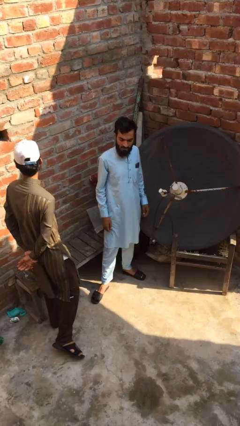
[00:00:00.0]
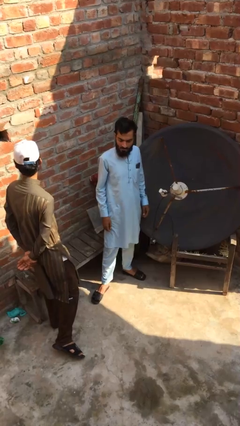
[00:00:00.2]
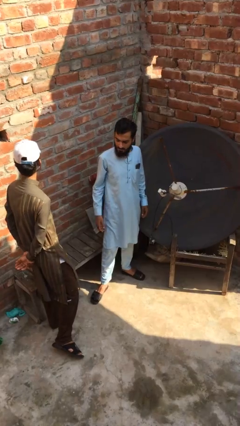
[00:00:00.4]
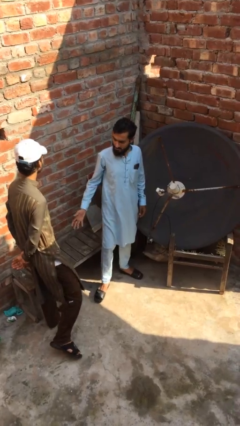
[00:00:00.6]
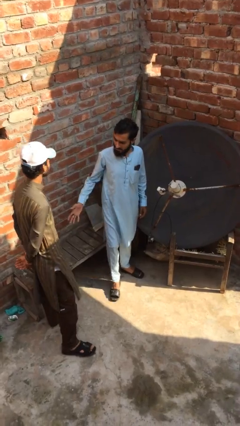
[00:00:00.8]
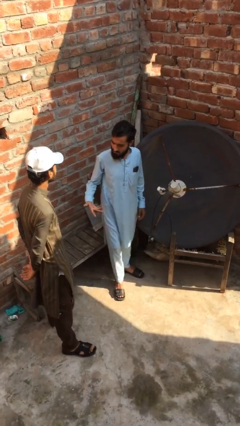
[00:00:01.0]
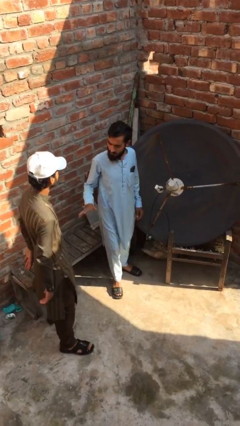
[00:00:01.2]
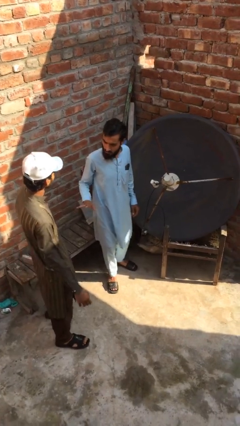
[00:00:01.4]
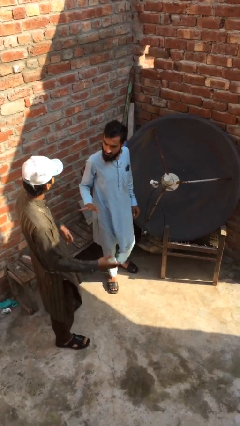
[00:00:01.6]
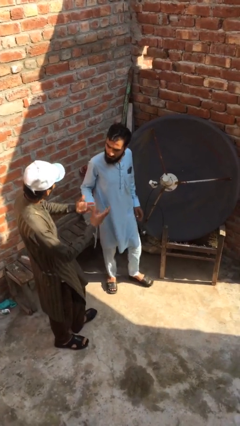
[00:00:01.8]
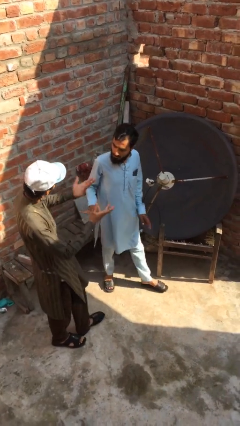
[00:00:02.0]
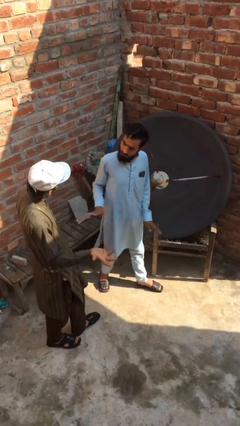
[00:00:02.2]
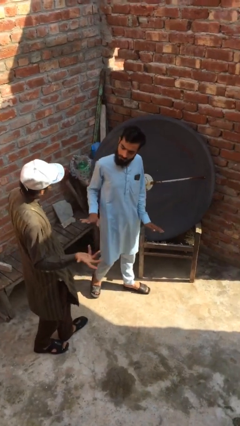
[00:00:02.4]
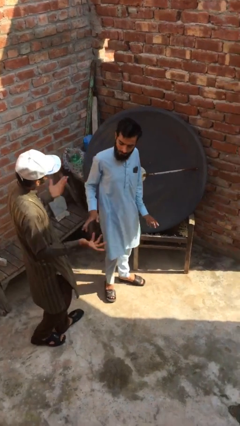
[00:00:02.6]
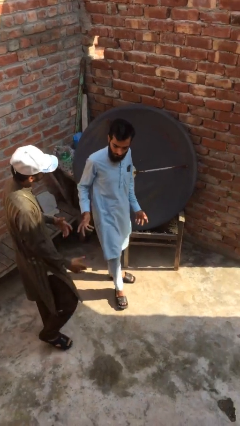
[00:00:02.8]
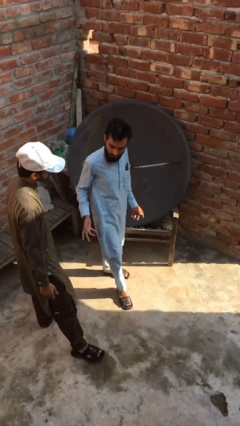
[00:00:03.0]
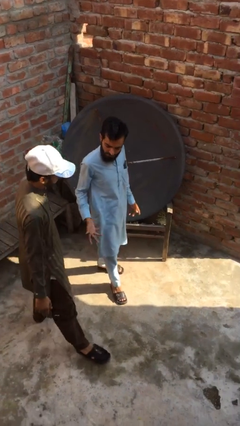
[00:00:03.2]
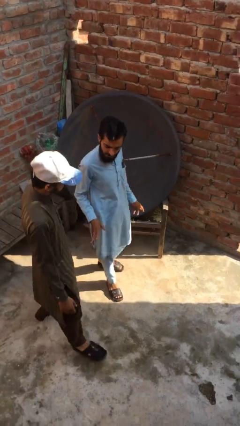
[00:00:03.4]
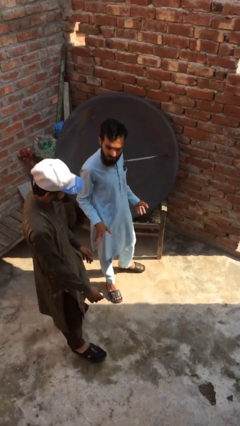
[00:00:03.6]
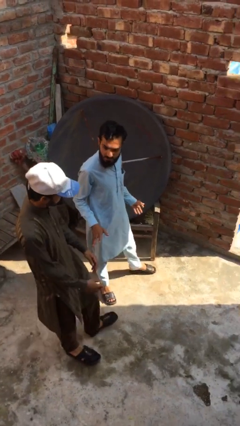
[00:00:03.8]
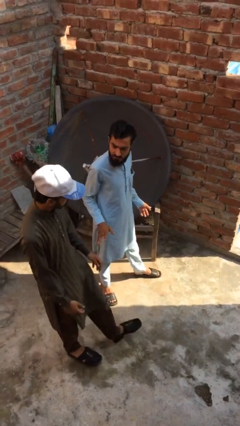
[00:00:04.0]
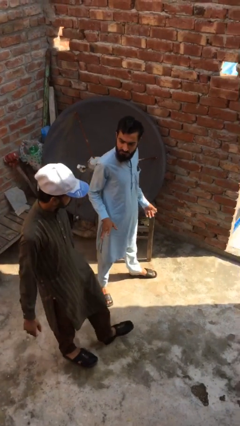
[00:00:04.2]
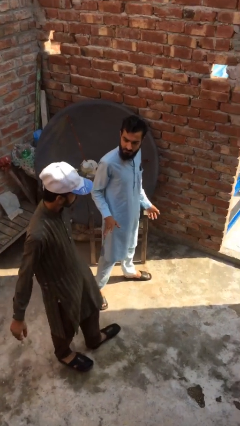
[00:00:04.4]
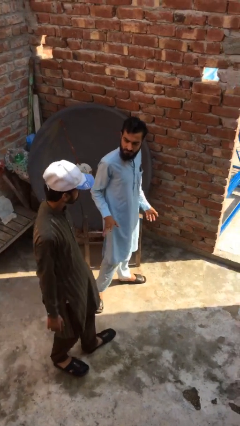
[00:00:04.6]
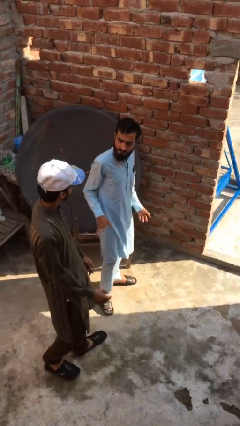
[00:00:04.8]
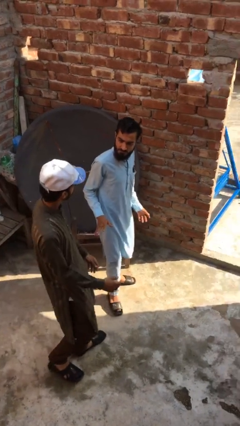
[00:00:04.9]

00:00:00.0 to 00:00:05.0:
person talks to person

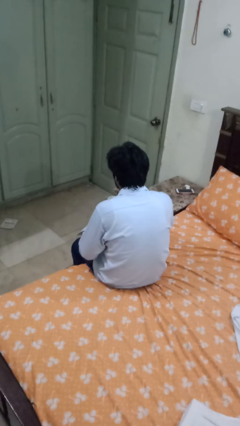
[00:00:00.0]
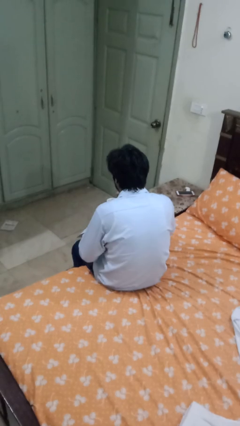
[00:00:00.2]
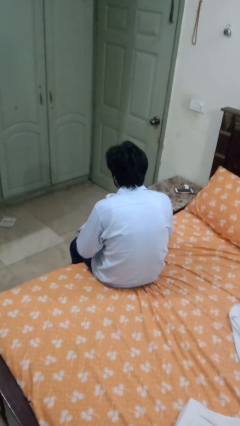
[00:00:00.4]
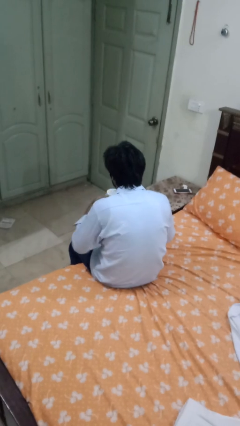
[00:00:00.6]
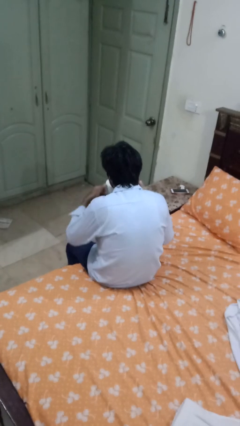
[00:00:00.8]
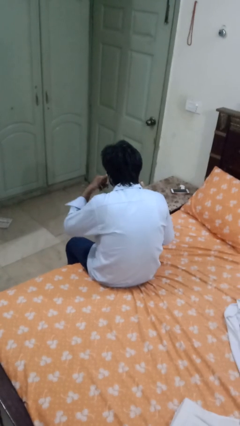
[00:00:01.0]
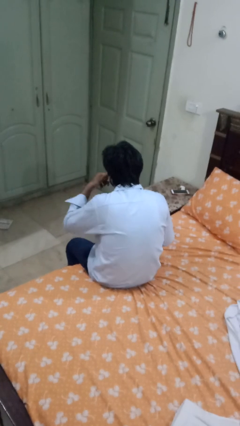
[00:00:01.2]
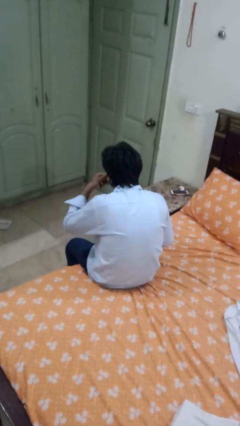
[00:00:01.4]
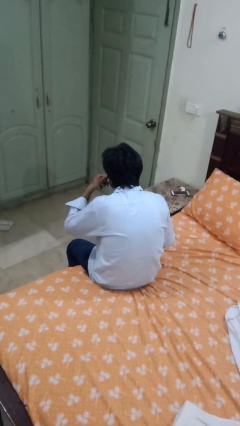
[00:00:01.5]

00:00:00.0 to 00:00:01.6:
person drinks from mug

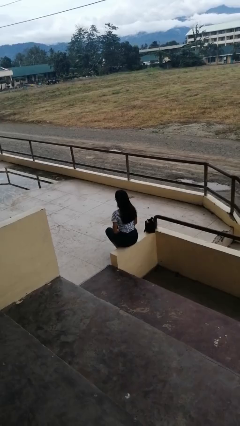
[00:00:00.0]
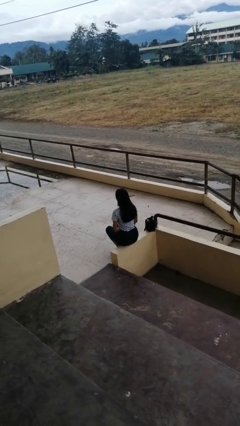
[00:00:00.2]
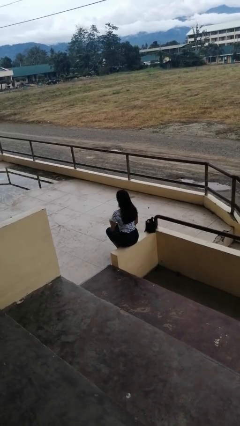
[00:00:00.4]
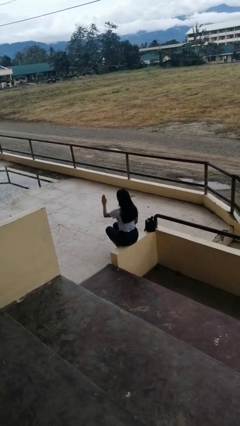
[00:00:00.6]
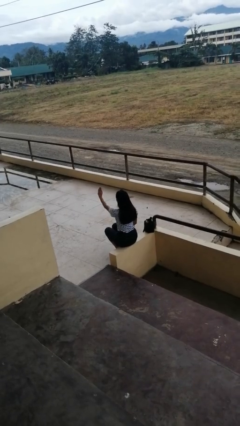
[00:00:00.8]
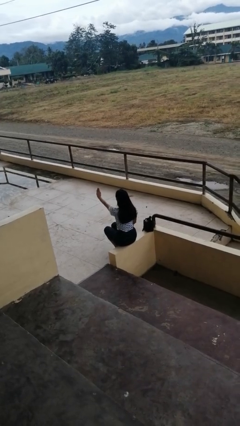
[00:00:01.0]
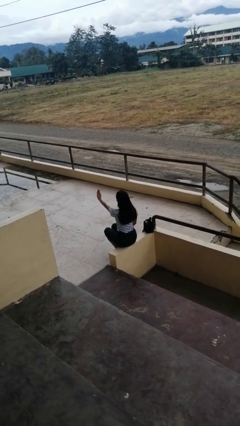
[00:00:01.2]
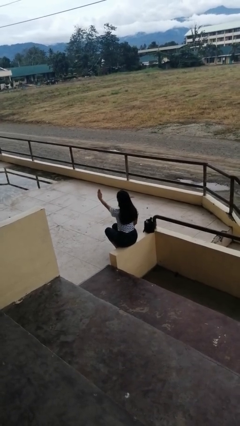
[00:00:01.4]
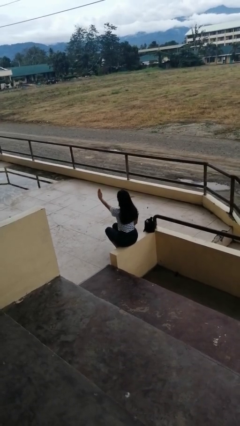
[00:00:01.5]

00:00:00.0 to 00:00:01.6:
person gestures stop

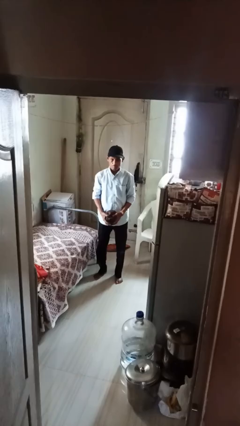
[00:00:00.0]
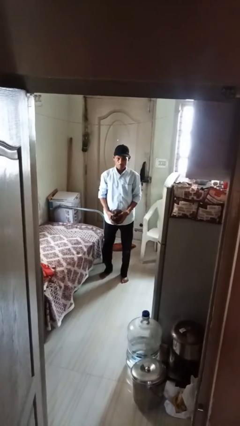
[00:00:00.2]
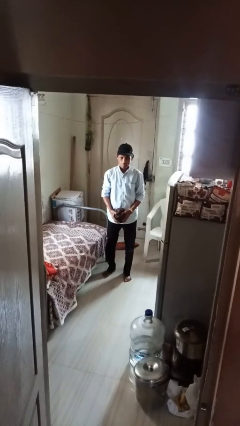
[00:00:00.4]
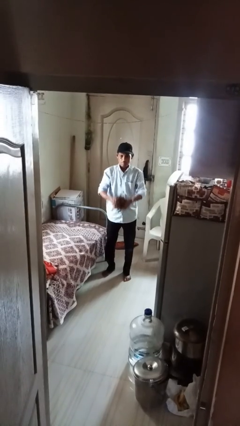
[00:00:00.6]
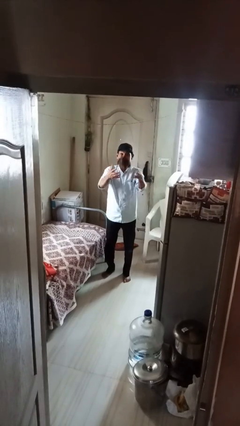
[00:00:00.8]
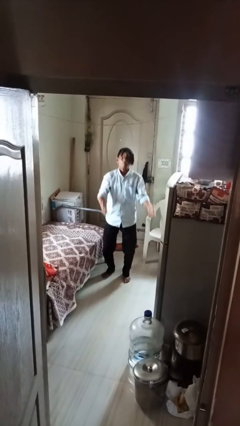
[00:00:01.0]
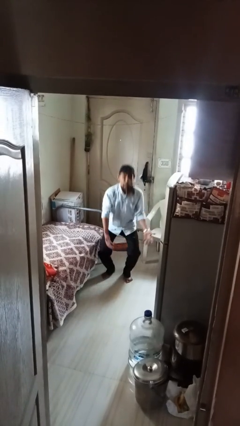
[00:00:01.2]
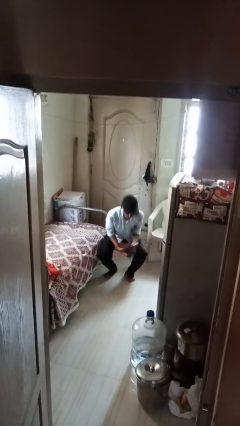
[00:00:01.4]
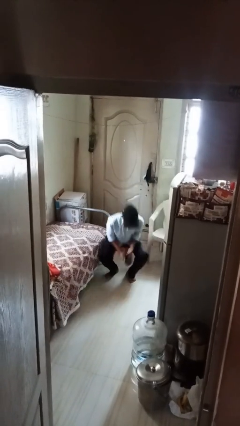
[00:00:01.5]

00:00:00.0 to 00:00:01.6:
person drops object

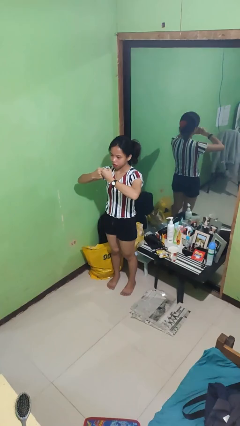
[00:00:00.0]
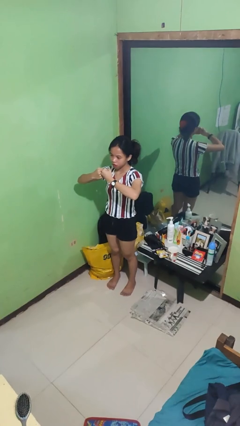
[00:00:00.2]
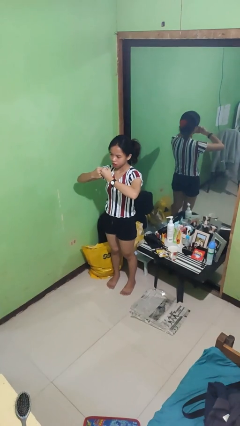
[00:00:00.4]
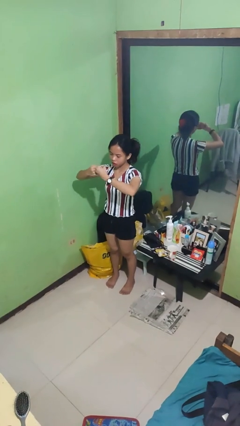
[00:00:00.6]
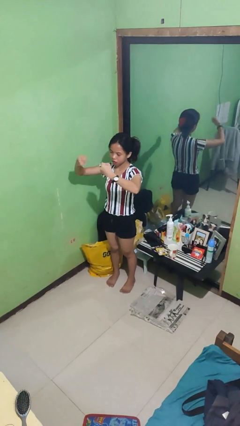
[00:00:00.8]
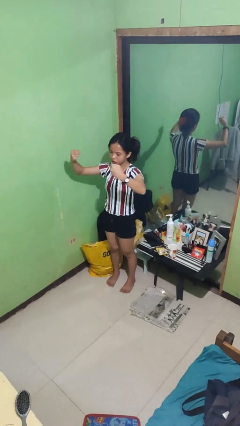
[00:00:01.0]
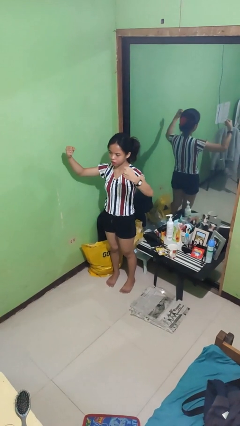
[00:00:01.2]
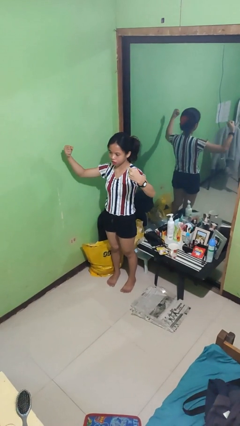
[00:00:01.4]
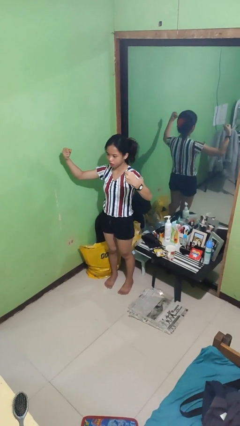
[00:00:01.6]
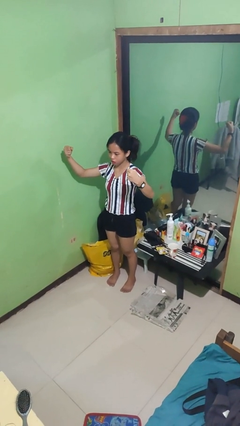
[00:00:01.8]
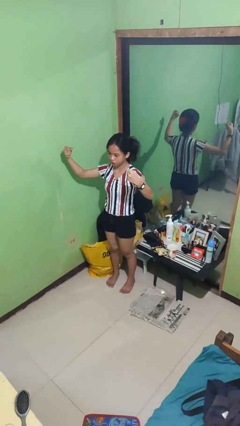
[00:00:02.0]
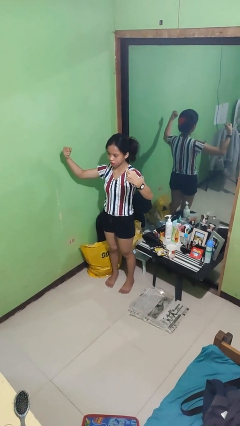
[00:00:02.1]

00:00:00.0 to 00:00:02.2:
person gestures zoom in

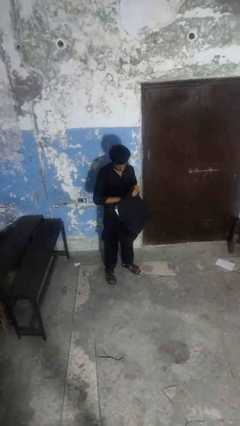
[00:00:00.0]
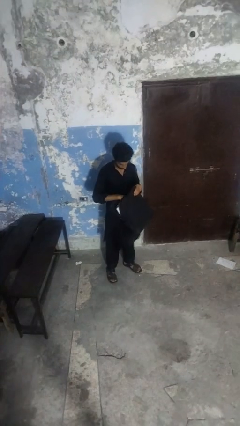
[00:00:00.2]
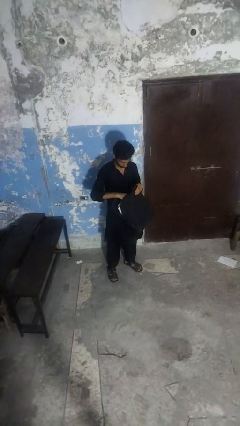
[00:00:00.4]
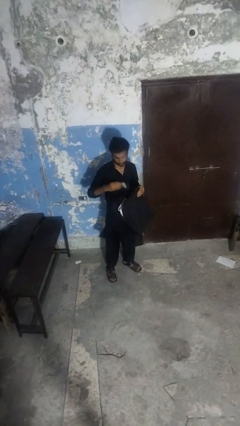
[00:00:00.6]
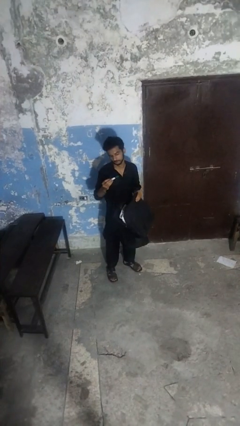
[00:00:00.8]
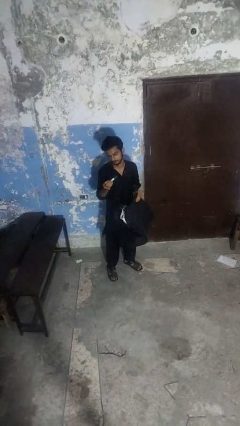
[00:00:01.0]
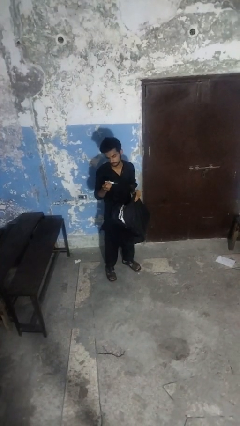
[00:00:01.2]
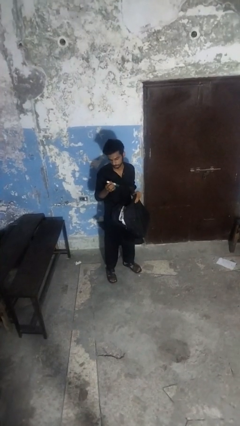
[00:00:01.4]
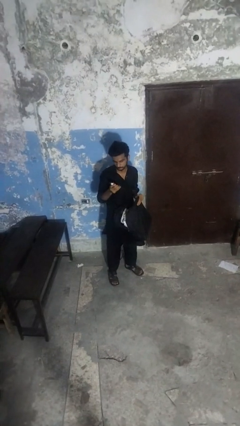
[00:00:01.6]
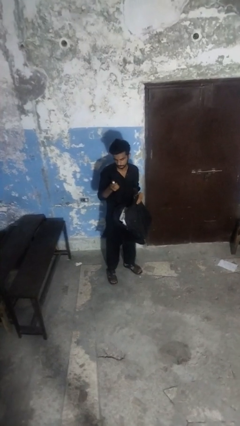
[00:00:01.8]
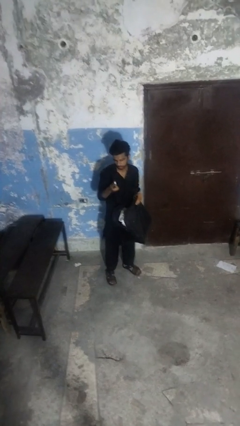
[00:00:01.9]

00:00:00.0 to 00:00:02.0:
person takes object from backpack

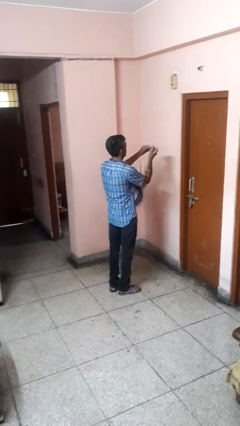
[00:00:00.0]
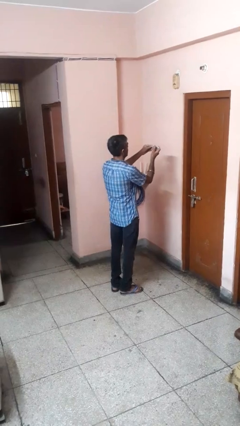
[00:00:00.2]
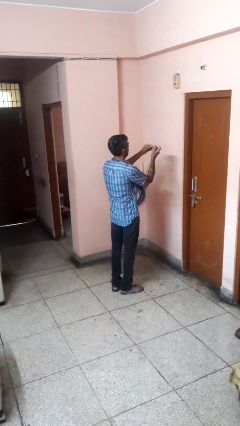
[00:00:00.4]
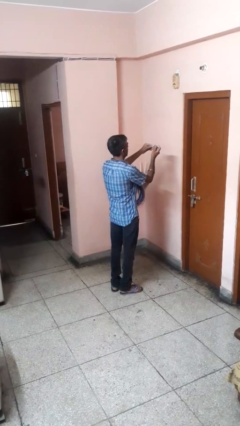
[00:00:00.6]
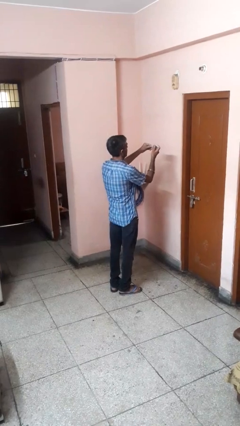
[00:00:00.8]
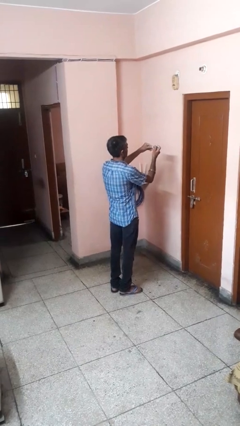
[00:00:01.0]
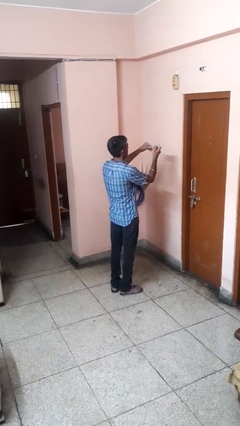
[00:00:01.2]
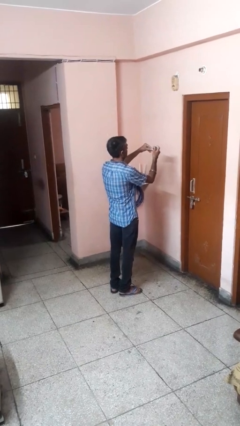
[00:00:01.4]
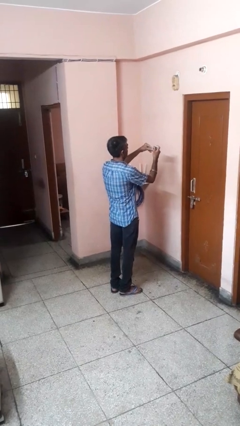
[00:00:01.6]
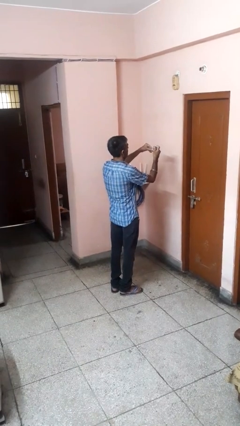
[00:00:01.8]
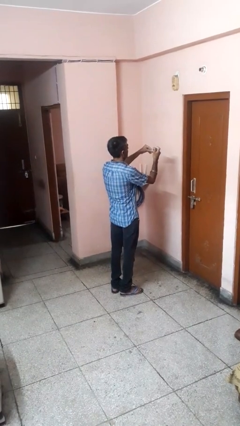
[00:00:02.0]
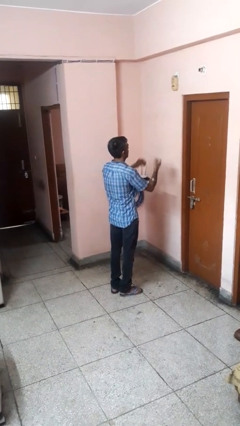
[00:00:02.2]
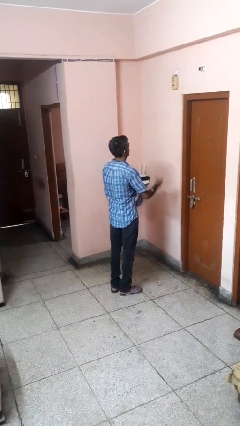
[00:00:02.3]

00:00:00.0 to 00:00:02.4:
person clips fingernails

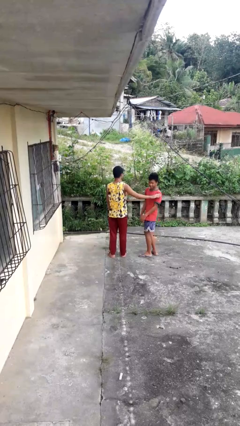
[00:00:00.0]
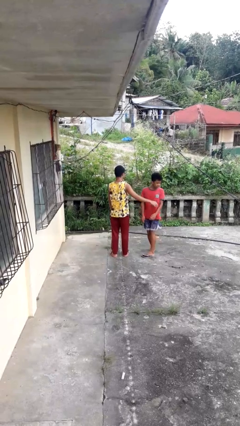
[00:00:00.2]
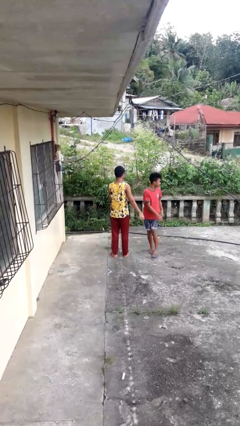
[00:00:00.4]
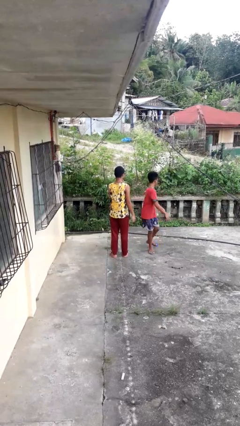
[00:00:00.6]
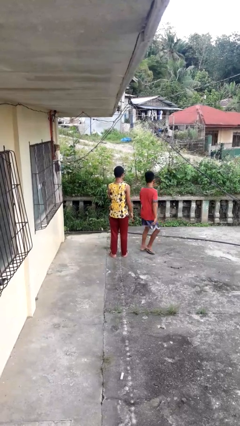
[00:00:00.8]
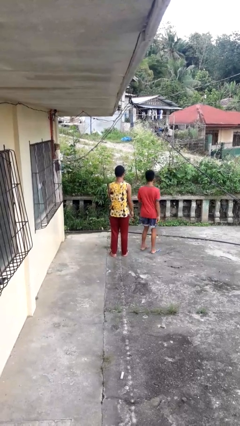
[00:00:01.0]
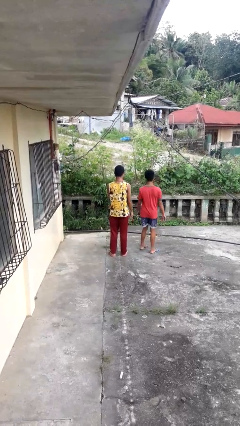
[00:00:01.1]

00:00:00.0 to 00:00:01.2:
person spins person around
